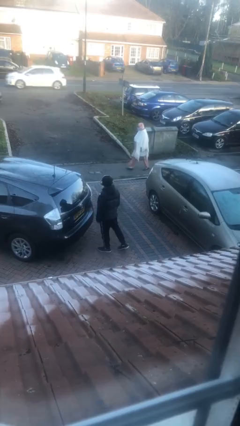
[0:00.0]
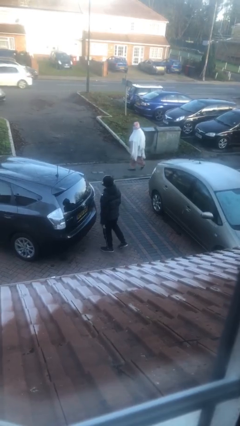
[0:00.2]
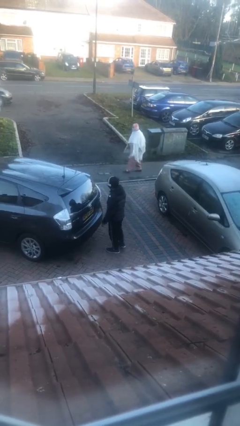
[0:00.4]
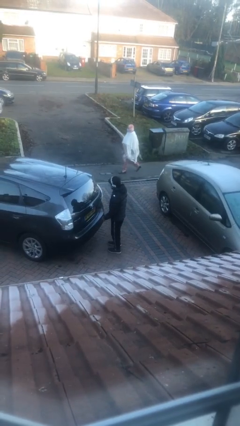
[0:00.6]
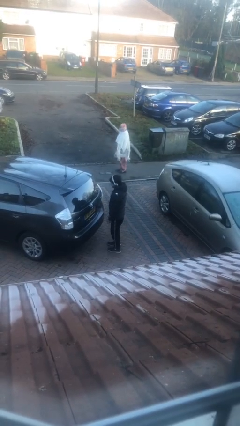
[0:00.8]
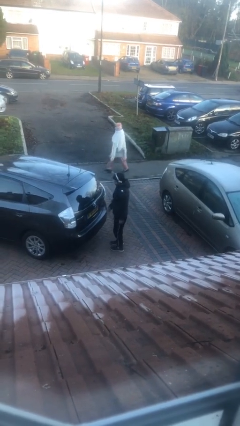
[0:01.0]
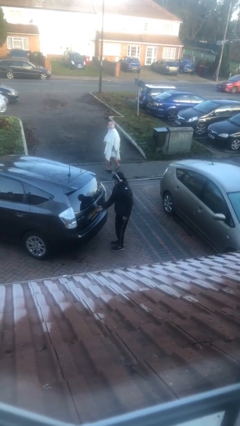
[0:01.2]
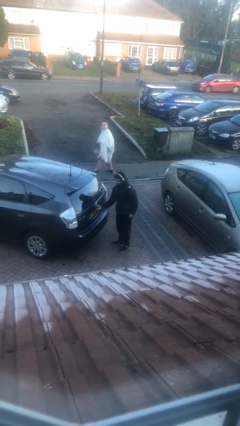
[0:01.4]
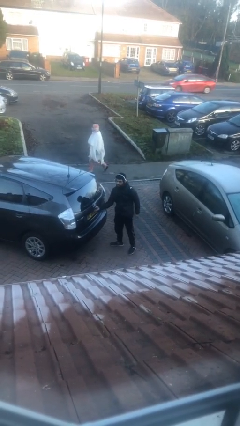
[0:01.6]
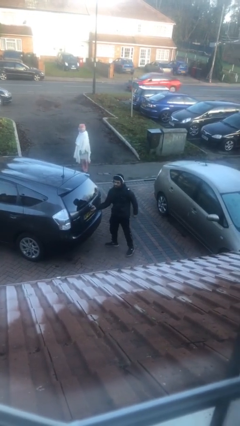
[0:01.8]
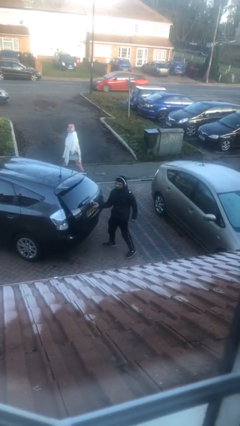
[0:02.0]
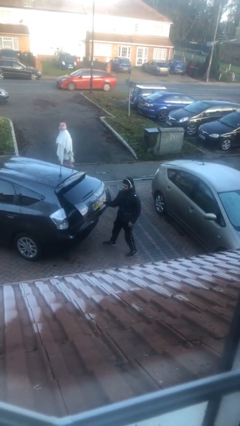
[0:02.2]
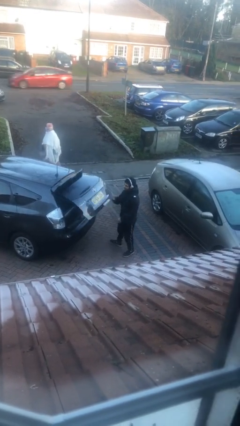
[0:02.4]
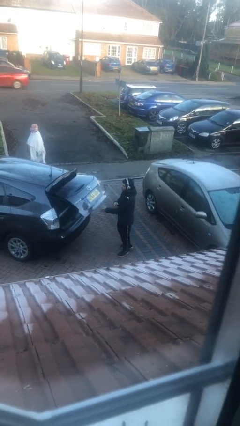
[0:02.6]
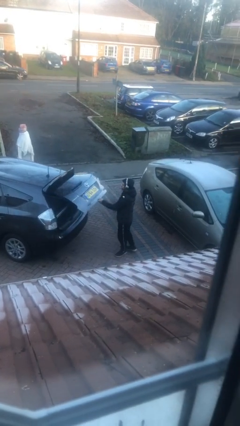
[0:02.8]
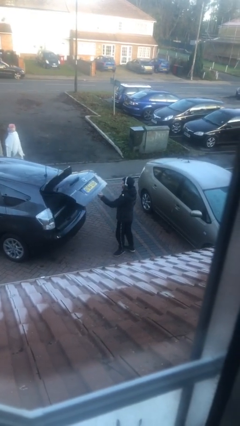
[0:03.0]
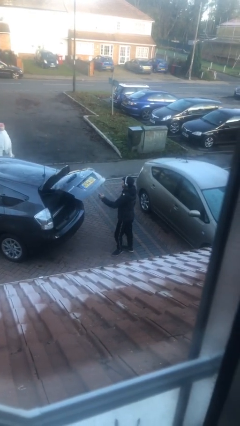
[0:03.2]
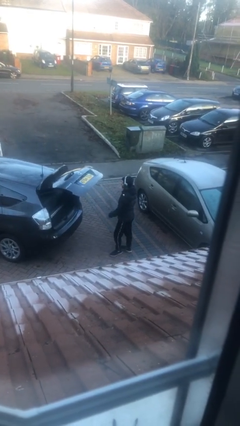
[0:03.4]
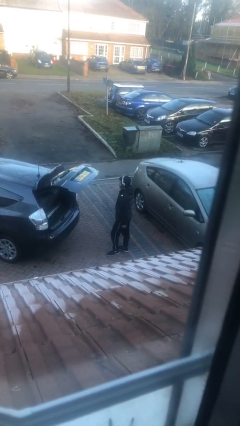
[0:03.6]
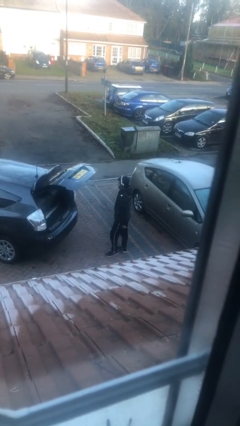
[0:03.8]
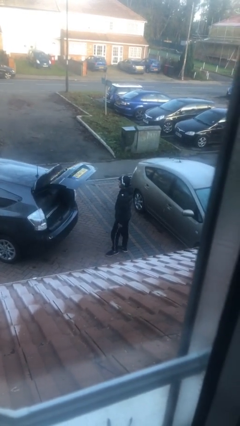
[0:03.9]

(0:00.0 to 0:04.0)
person opens car trunk

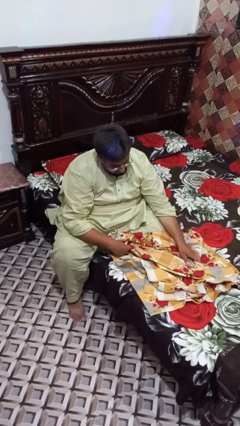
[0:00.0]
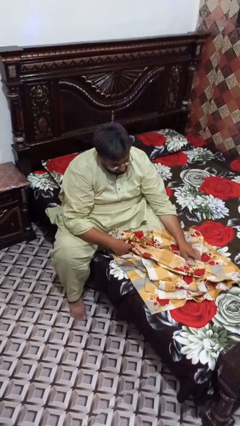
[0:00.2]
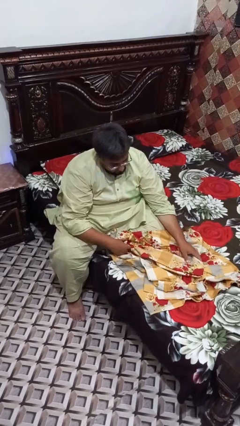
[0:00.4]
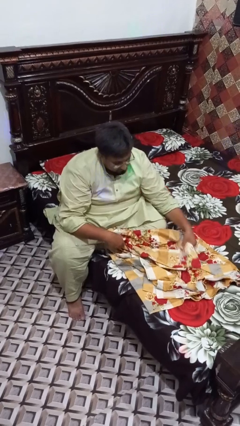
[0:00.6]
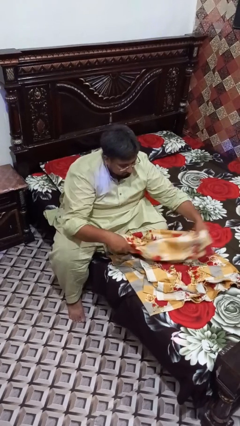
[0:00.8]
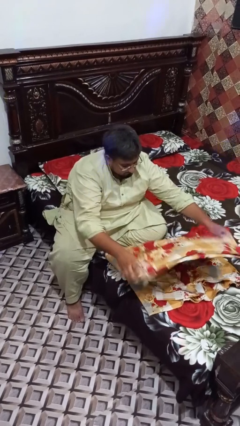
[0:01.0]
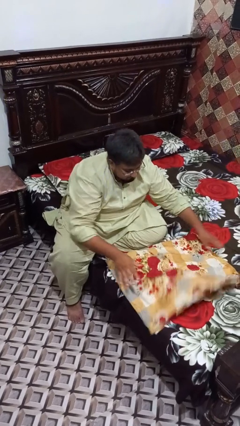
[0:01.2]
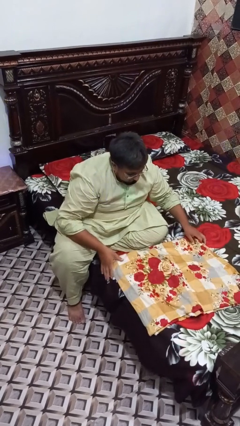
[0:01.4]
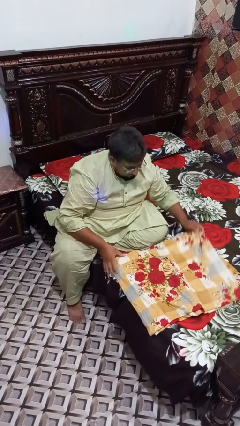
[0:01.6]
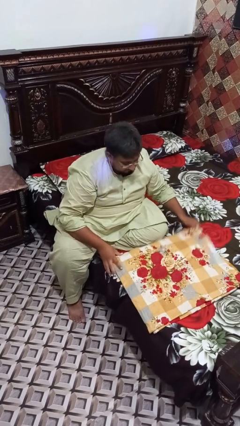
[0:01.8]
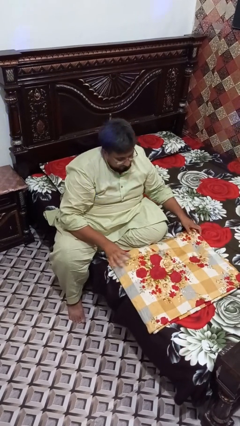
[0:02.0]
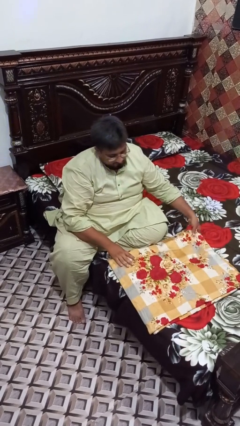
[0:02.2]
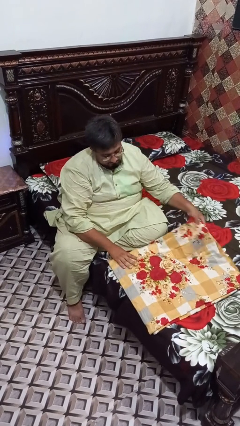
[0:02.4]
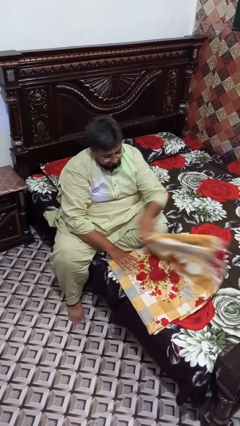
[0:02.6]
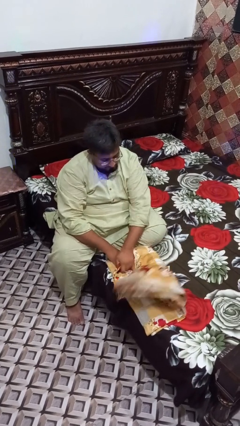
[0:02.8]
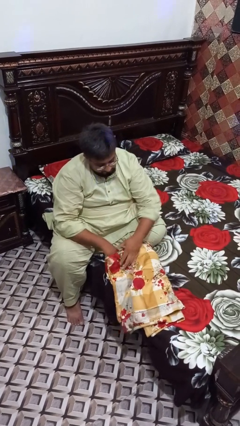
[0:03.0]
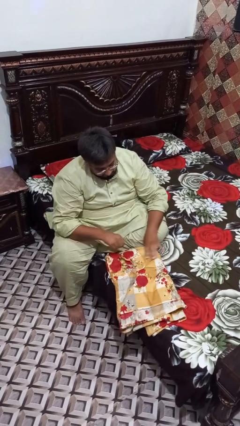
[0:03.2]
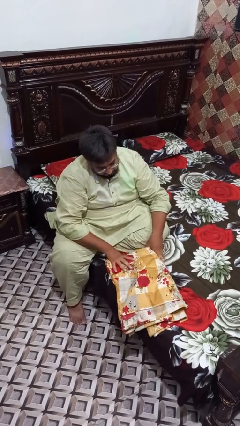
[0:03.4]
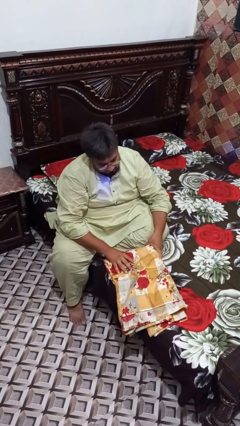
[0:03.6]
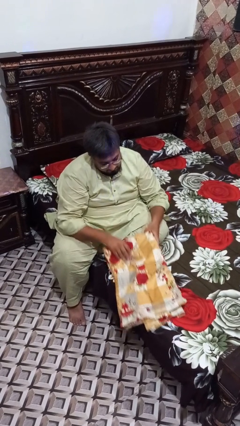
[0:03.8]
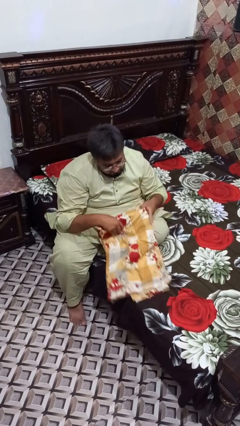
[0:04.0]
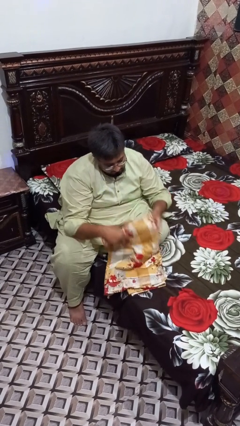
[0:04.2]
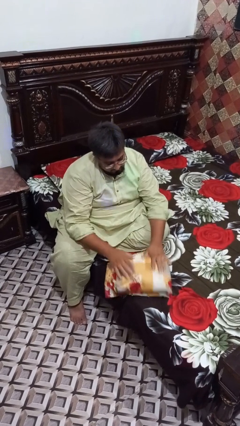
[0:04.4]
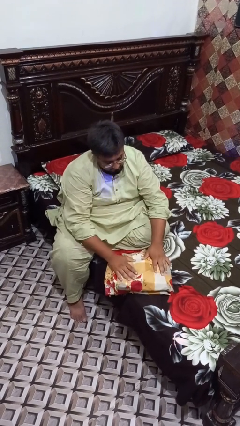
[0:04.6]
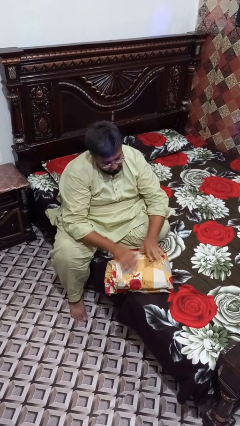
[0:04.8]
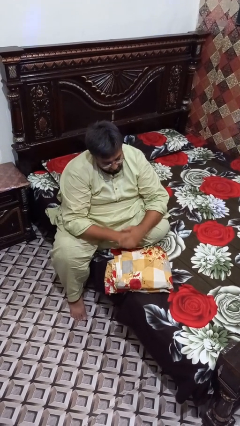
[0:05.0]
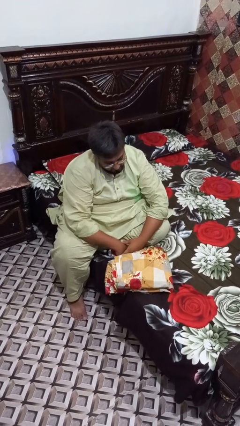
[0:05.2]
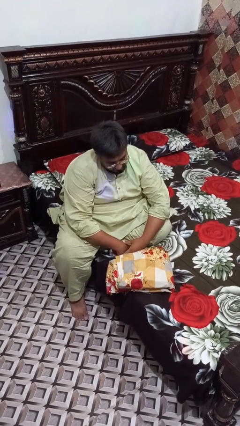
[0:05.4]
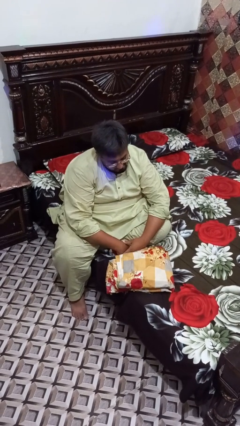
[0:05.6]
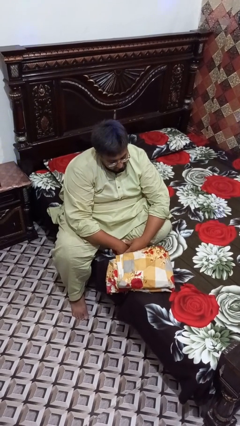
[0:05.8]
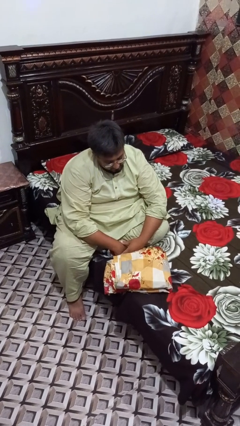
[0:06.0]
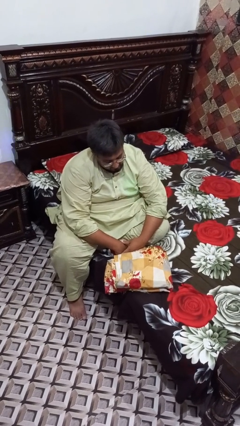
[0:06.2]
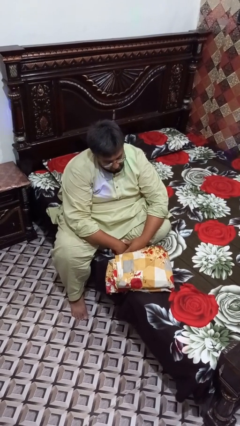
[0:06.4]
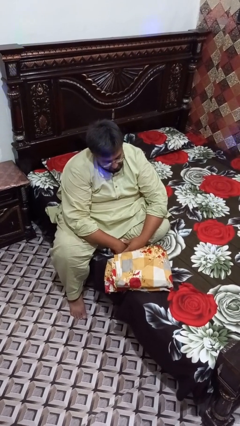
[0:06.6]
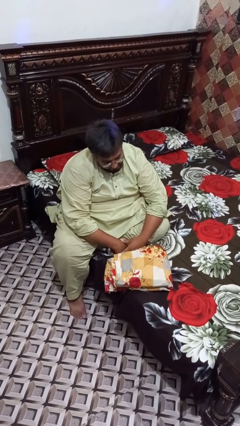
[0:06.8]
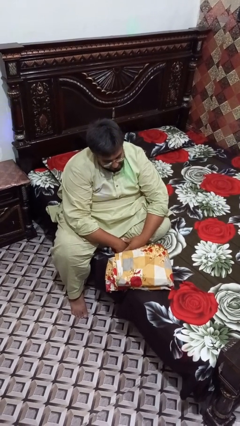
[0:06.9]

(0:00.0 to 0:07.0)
person folds blanket

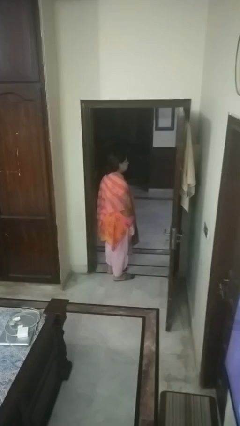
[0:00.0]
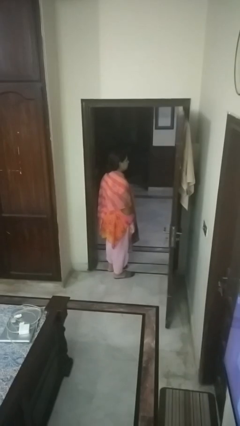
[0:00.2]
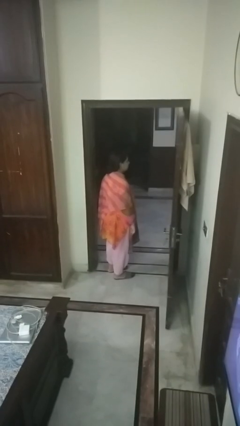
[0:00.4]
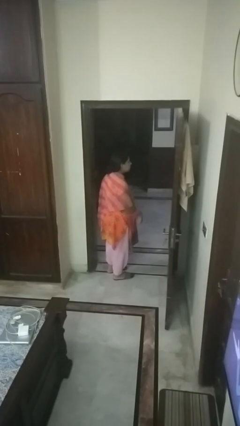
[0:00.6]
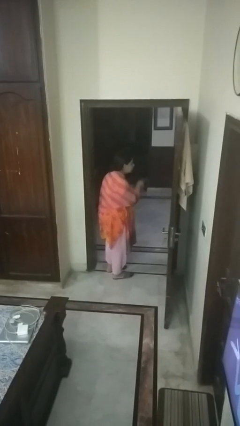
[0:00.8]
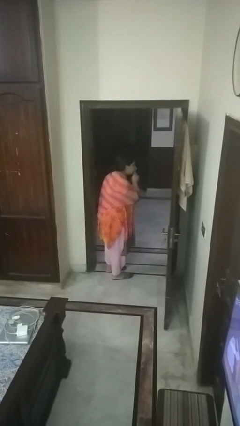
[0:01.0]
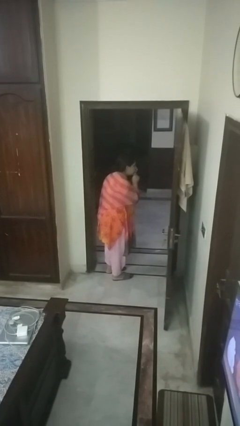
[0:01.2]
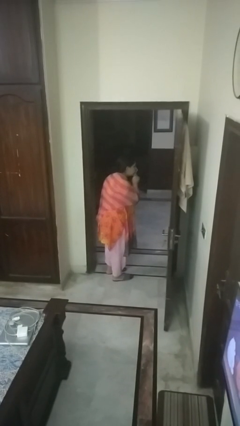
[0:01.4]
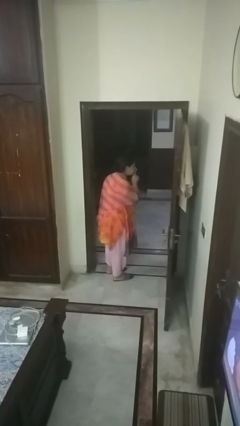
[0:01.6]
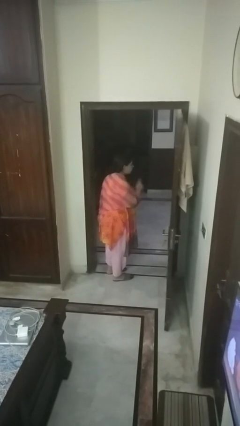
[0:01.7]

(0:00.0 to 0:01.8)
person gestures be quiet

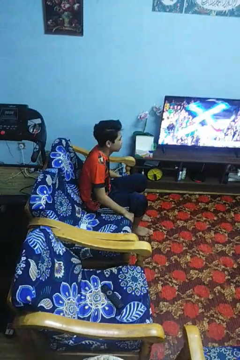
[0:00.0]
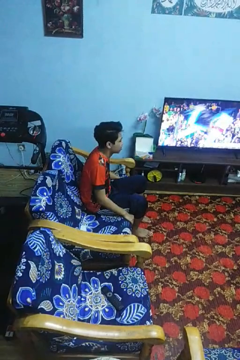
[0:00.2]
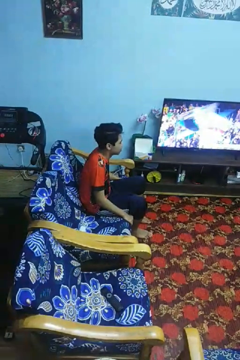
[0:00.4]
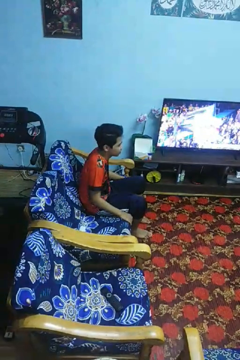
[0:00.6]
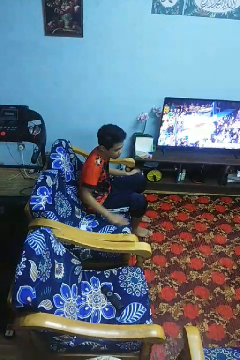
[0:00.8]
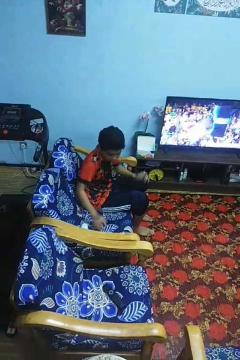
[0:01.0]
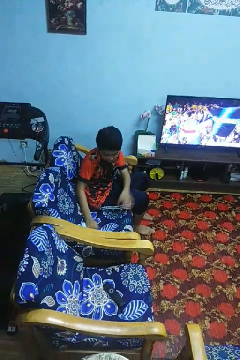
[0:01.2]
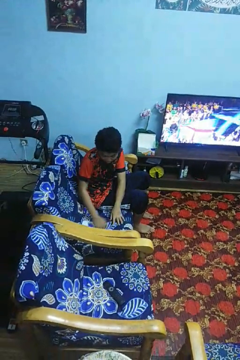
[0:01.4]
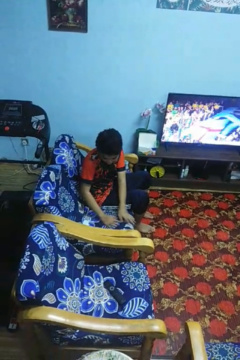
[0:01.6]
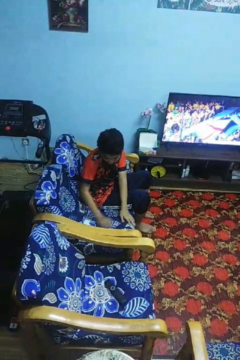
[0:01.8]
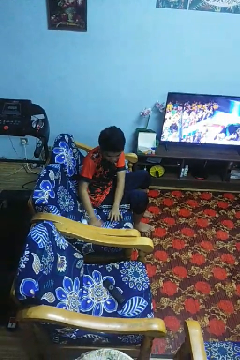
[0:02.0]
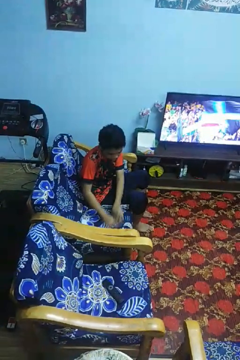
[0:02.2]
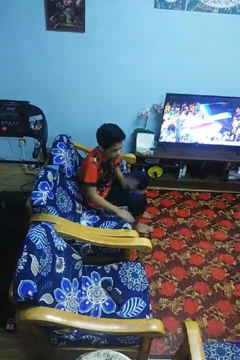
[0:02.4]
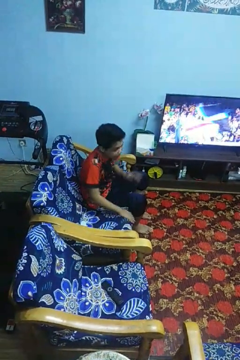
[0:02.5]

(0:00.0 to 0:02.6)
person searches in couch

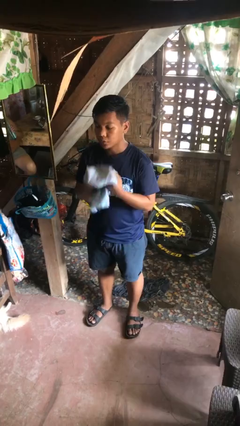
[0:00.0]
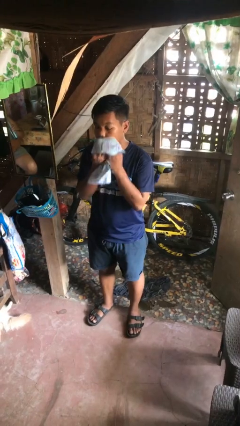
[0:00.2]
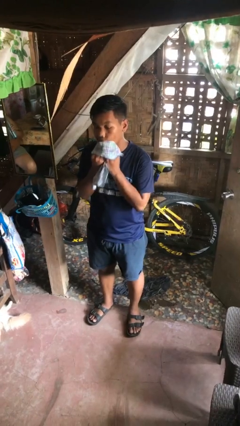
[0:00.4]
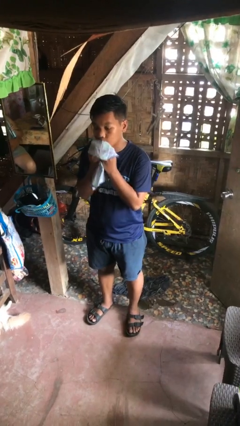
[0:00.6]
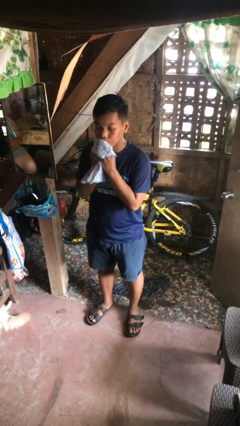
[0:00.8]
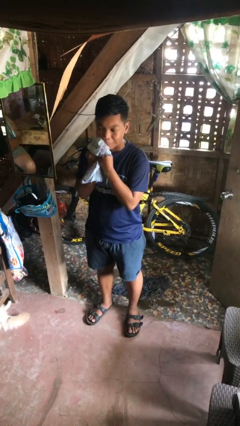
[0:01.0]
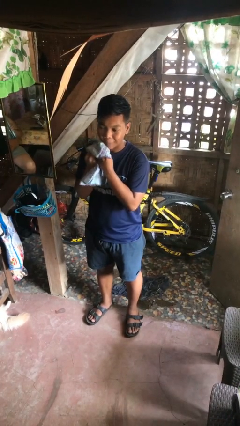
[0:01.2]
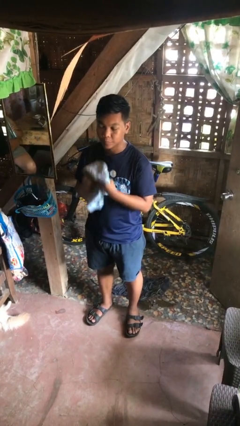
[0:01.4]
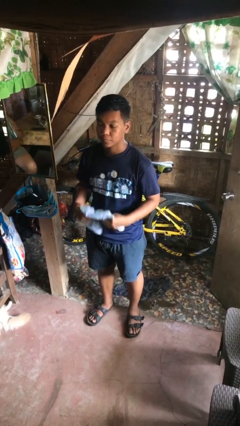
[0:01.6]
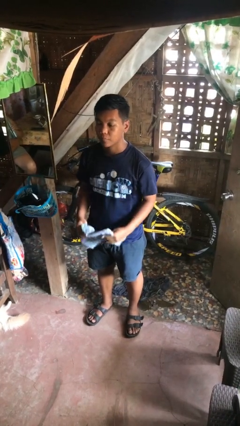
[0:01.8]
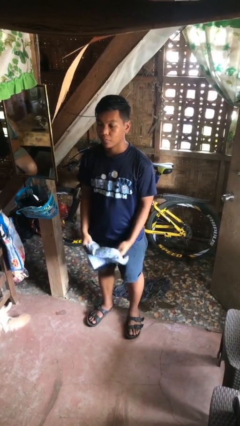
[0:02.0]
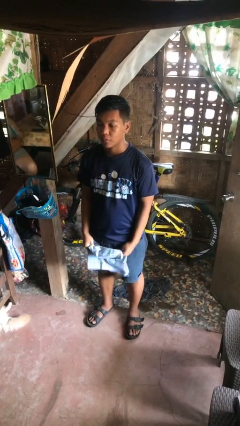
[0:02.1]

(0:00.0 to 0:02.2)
person wipes mouth with napkin
